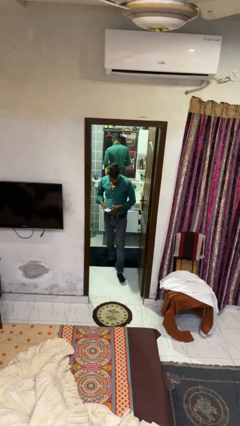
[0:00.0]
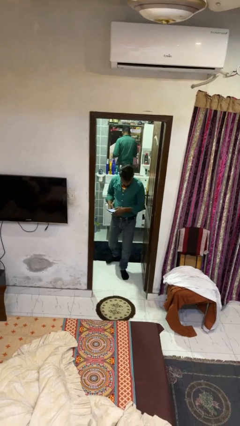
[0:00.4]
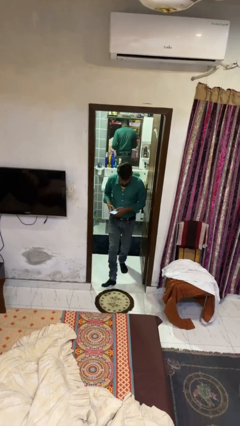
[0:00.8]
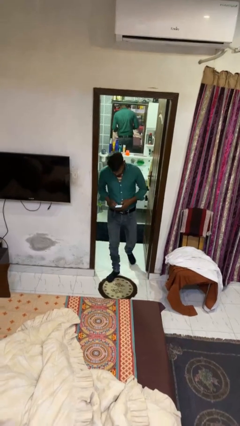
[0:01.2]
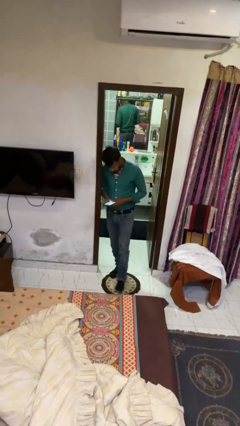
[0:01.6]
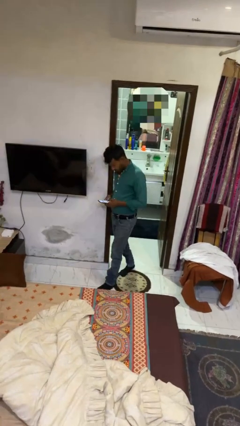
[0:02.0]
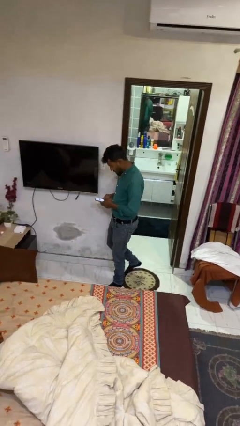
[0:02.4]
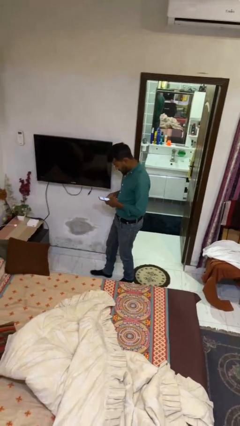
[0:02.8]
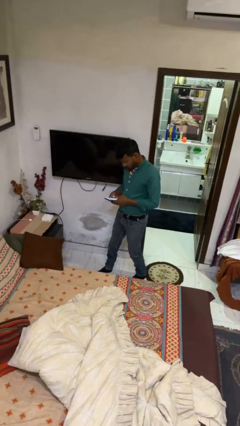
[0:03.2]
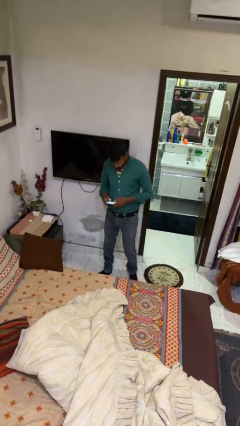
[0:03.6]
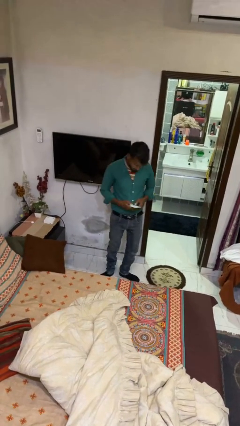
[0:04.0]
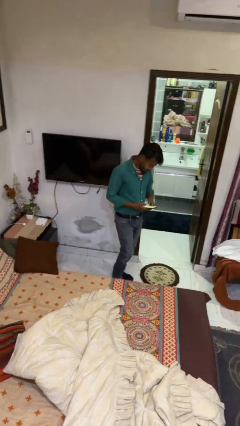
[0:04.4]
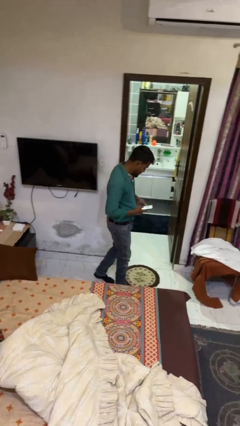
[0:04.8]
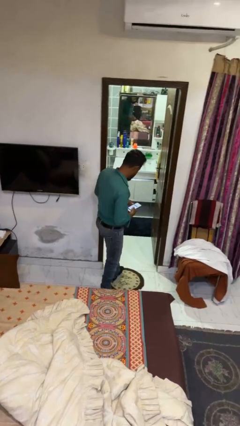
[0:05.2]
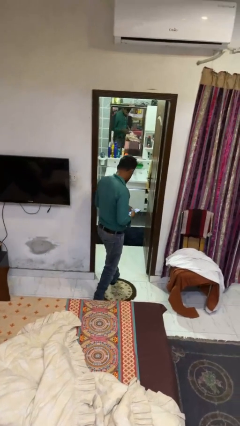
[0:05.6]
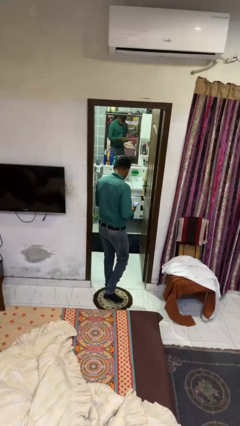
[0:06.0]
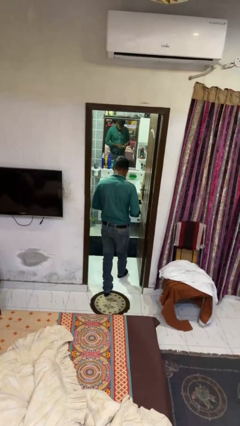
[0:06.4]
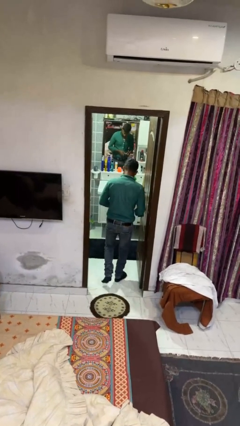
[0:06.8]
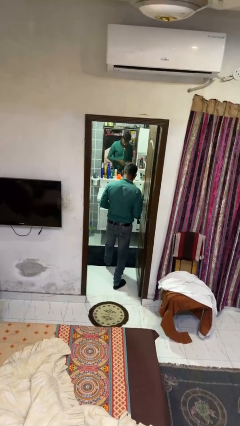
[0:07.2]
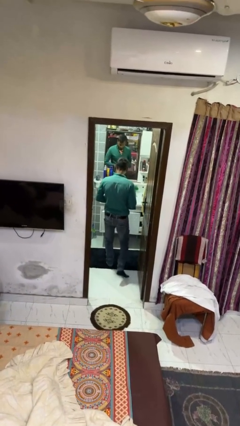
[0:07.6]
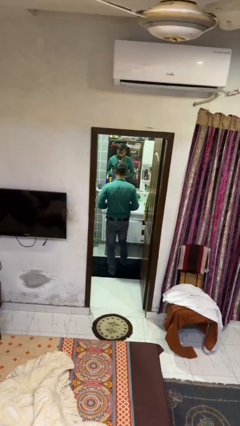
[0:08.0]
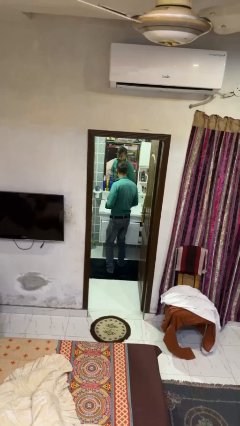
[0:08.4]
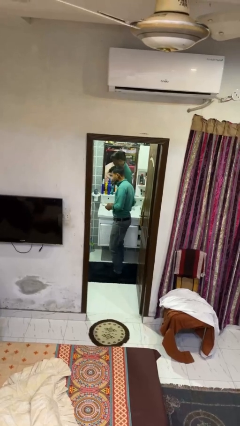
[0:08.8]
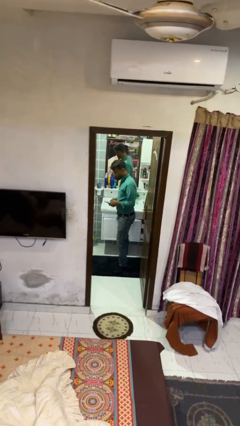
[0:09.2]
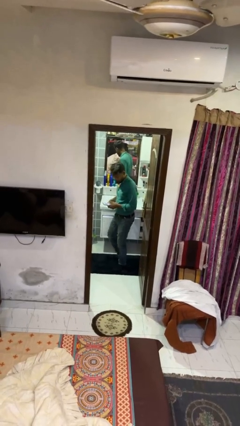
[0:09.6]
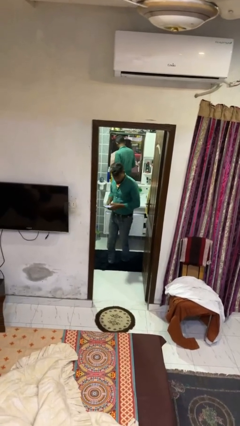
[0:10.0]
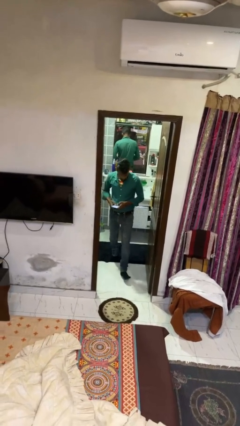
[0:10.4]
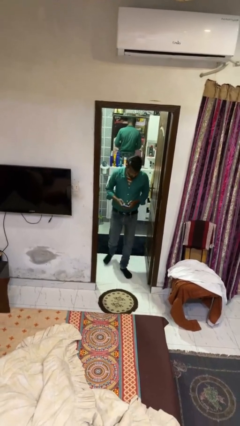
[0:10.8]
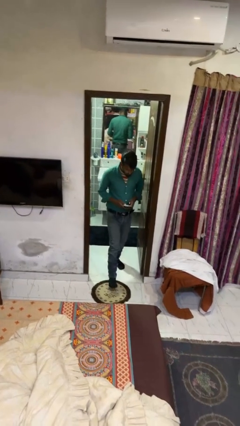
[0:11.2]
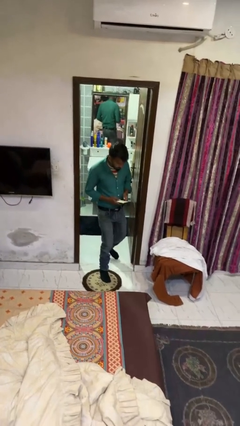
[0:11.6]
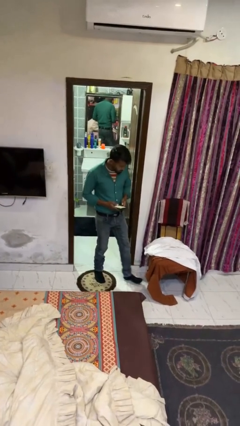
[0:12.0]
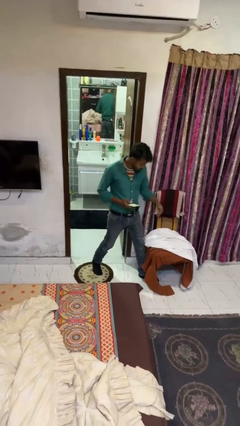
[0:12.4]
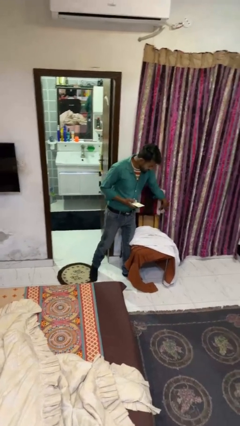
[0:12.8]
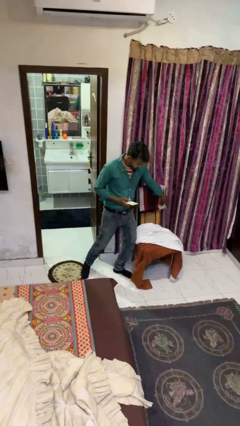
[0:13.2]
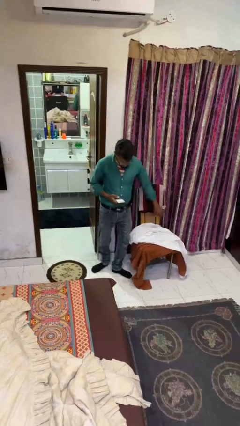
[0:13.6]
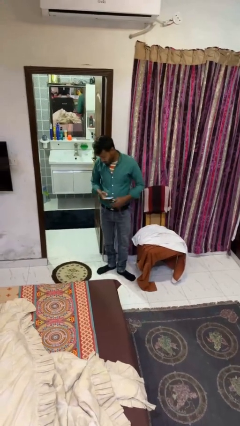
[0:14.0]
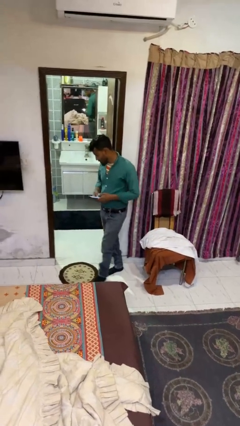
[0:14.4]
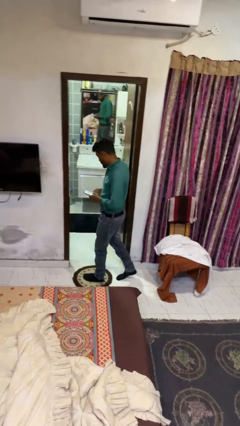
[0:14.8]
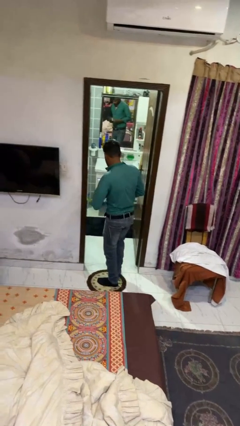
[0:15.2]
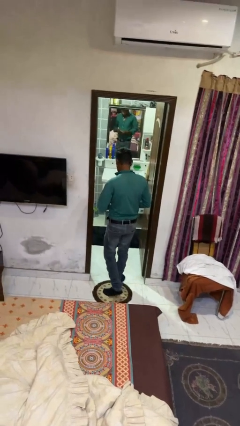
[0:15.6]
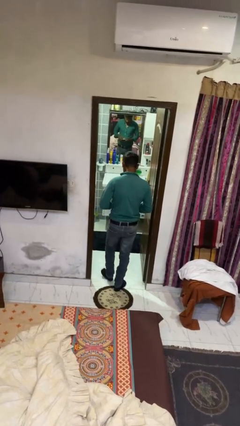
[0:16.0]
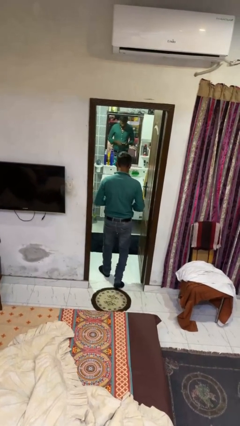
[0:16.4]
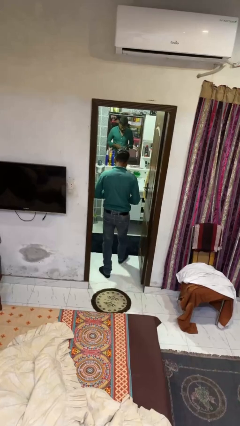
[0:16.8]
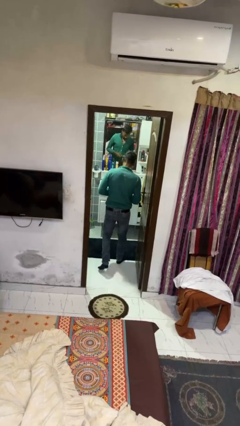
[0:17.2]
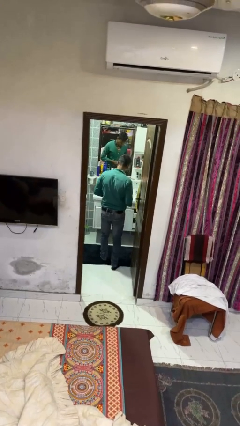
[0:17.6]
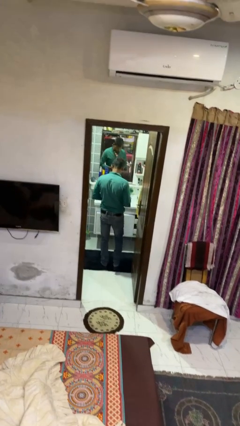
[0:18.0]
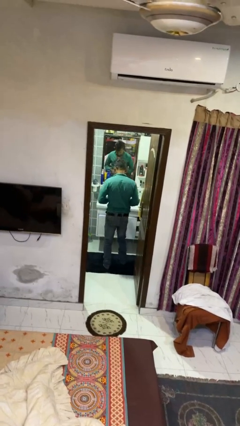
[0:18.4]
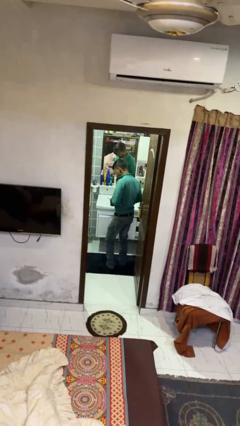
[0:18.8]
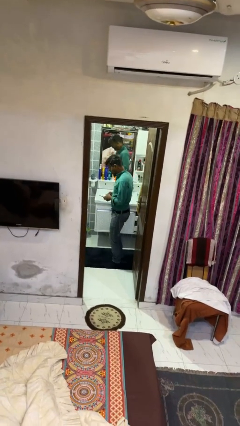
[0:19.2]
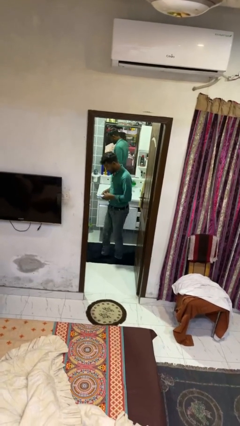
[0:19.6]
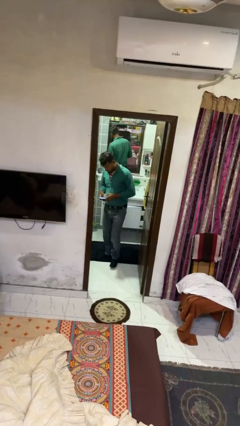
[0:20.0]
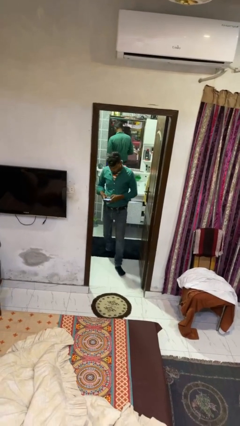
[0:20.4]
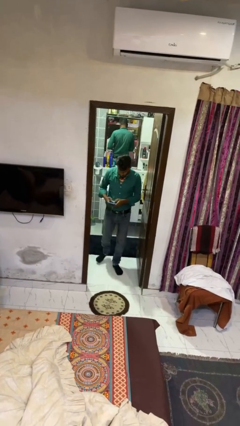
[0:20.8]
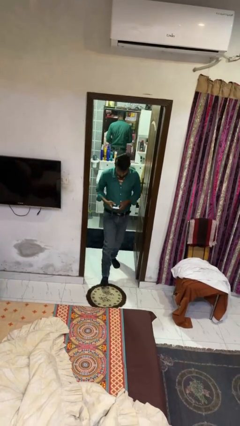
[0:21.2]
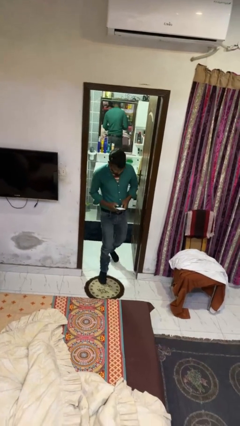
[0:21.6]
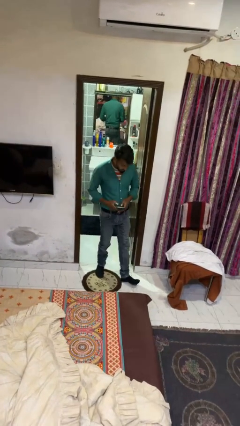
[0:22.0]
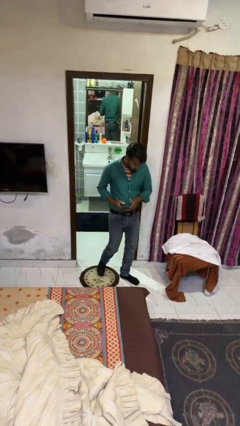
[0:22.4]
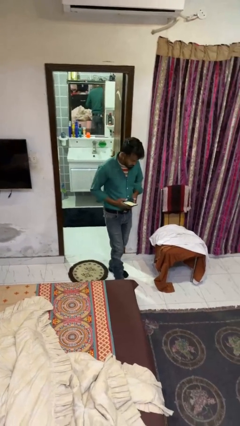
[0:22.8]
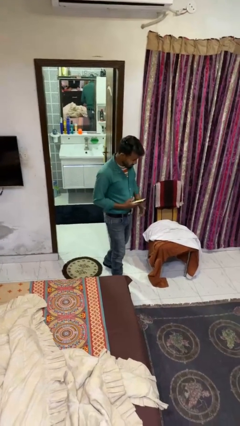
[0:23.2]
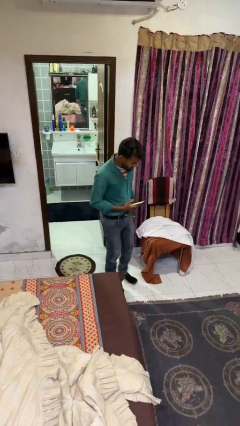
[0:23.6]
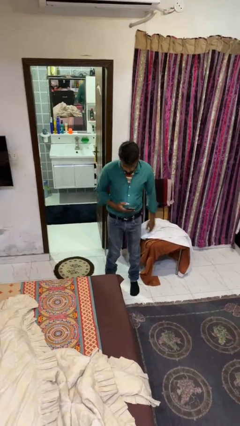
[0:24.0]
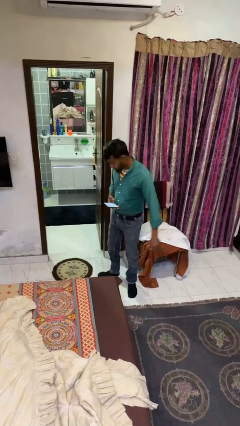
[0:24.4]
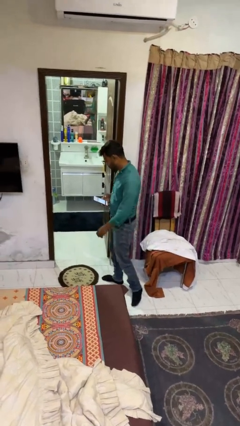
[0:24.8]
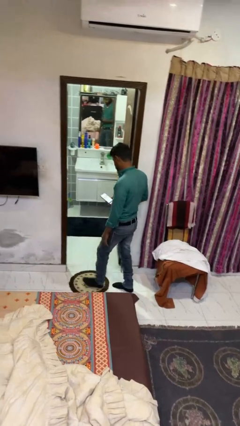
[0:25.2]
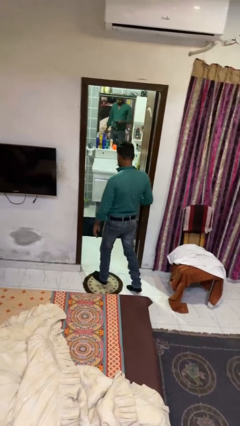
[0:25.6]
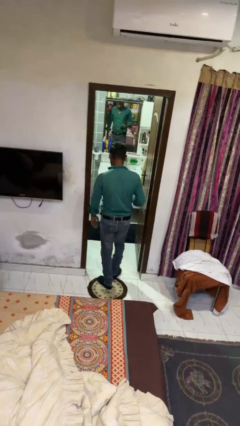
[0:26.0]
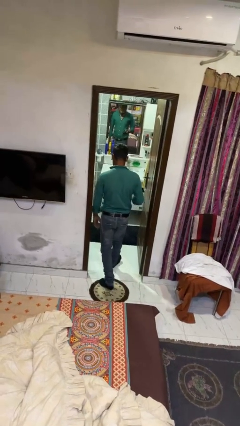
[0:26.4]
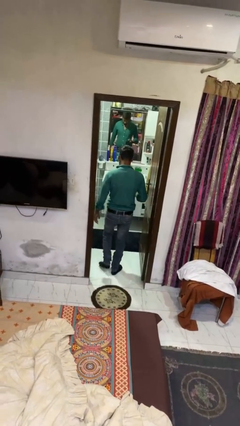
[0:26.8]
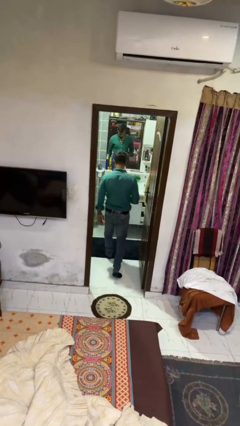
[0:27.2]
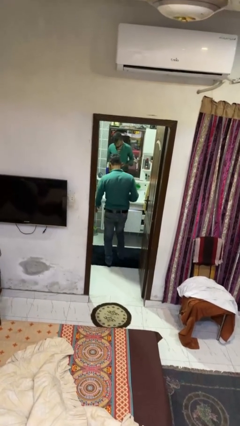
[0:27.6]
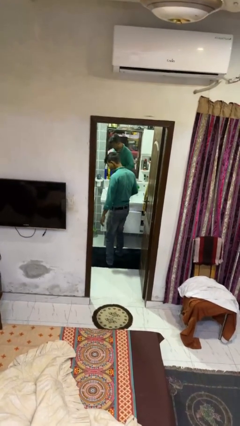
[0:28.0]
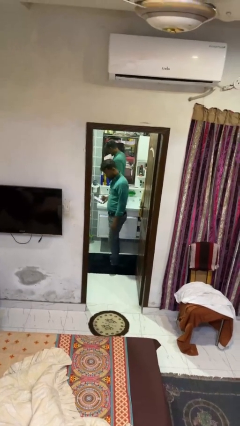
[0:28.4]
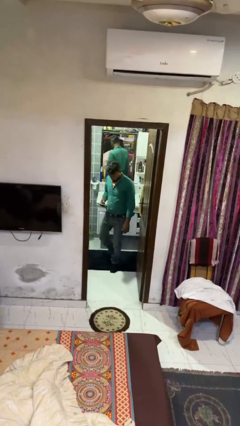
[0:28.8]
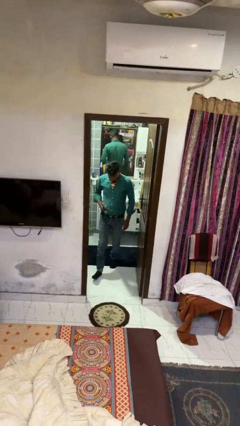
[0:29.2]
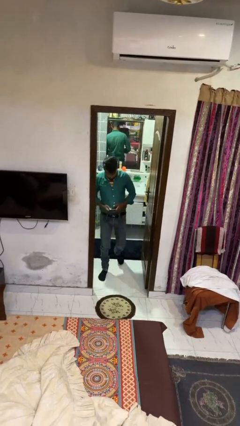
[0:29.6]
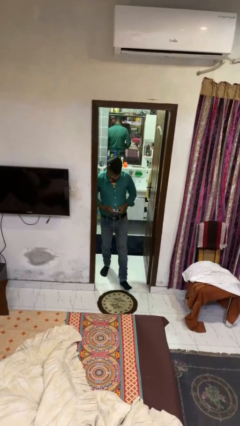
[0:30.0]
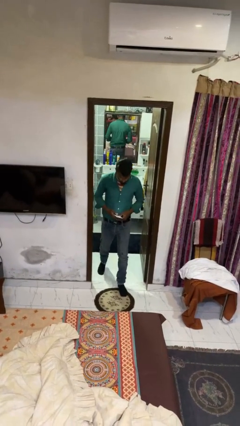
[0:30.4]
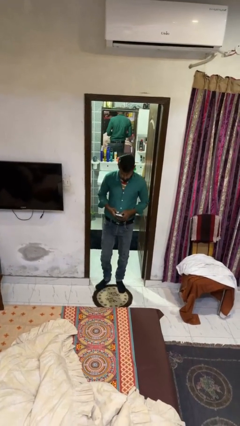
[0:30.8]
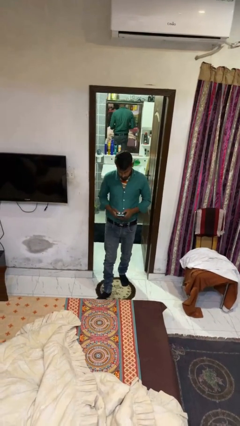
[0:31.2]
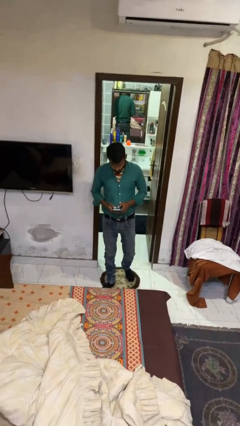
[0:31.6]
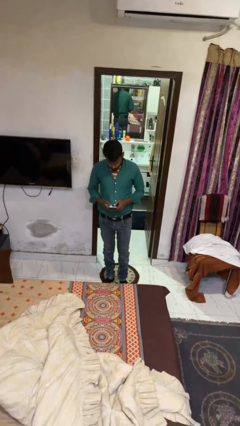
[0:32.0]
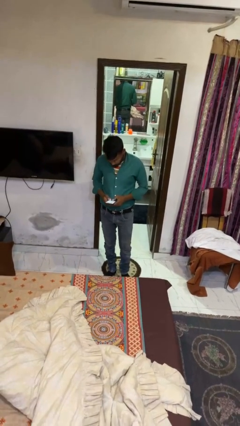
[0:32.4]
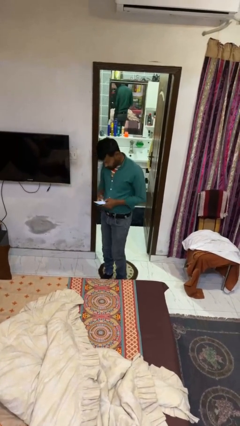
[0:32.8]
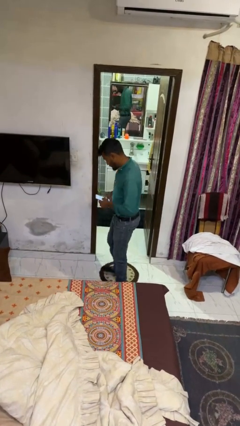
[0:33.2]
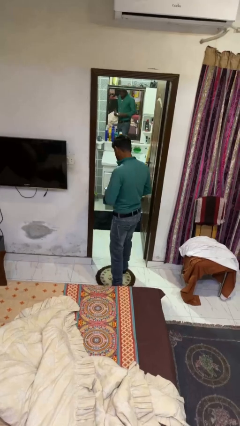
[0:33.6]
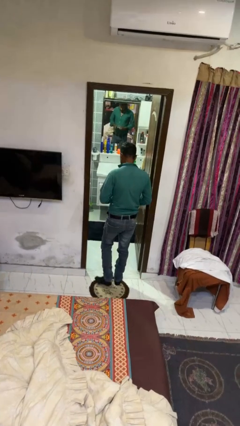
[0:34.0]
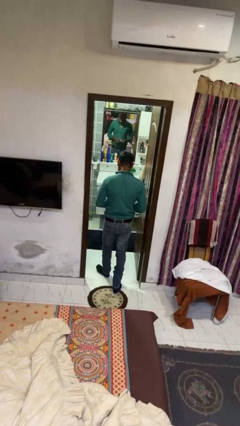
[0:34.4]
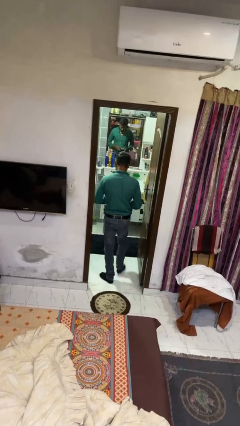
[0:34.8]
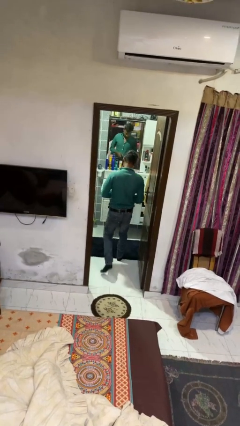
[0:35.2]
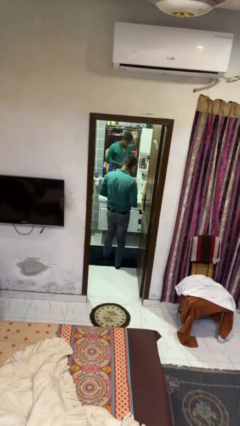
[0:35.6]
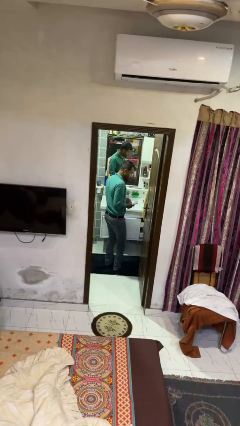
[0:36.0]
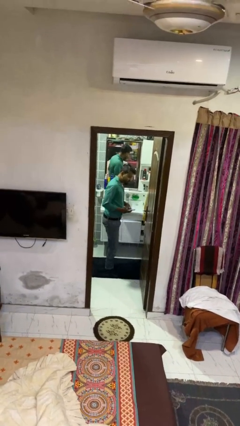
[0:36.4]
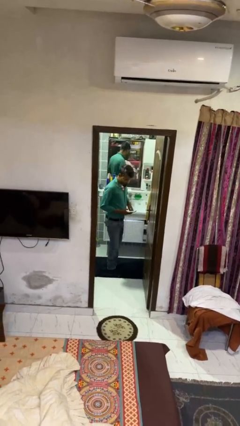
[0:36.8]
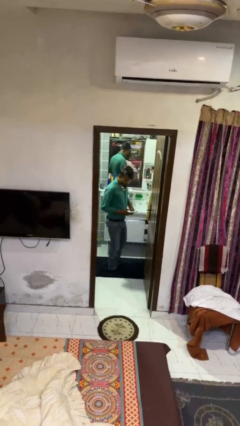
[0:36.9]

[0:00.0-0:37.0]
person texts on phone
